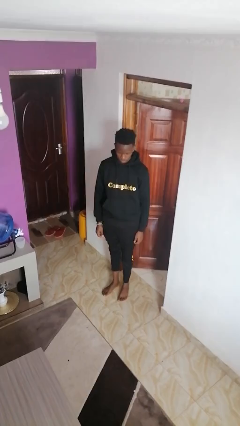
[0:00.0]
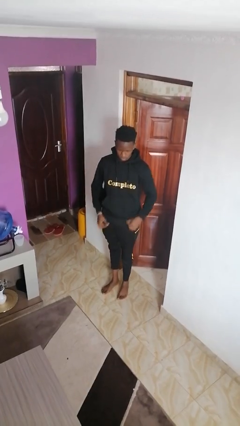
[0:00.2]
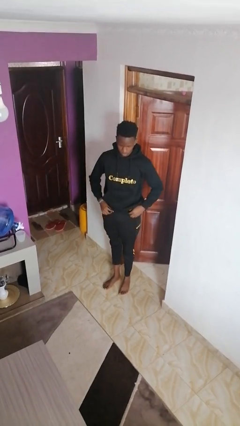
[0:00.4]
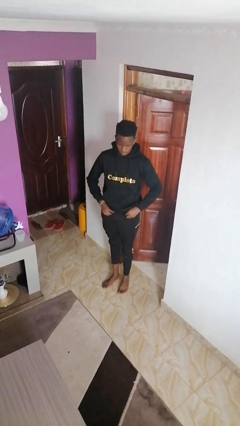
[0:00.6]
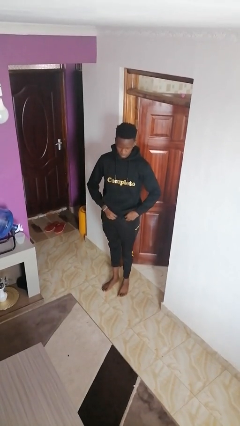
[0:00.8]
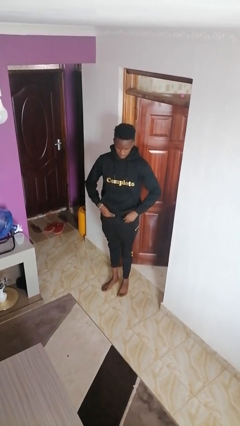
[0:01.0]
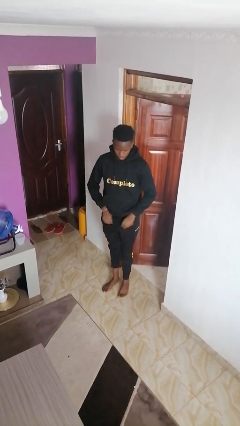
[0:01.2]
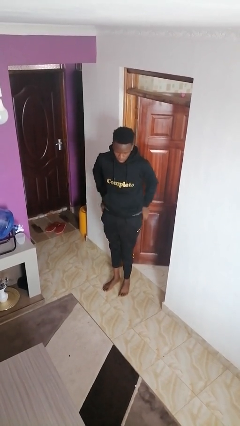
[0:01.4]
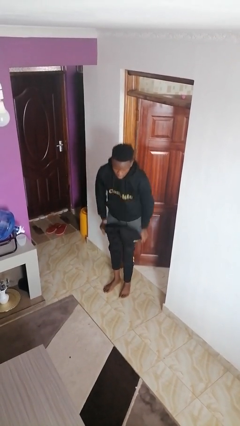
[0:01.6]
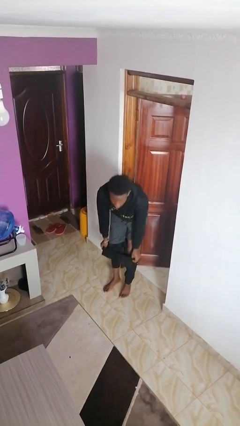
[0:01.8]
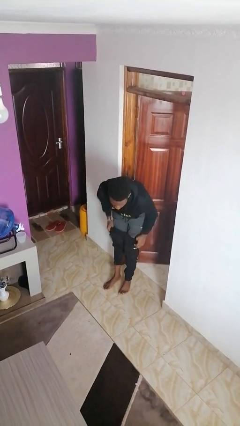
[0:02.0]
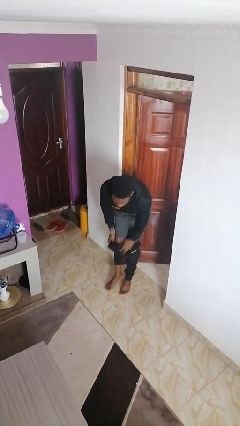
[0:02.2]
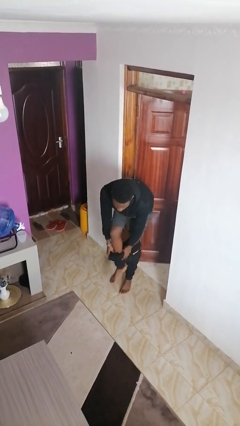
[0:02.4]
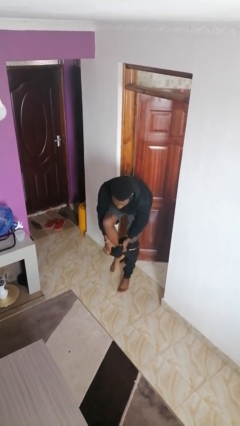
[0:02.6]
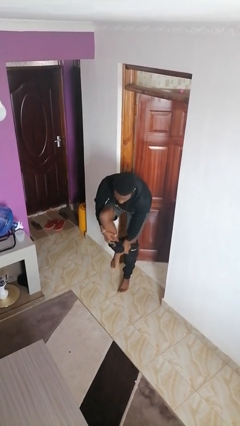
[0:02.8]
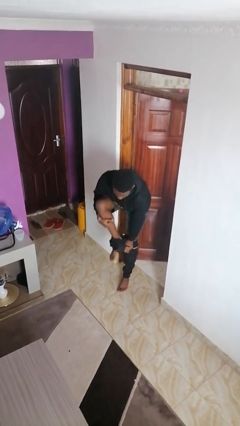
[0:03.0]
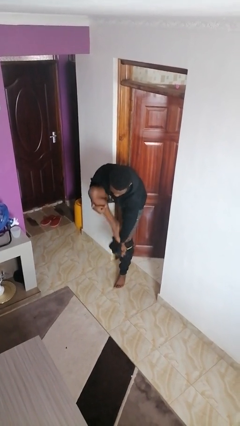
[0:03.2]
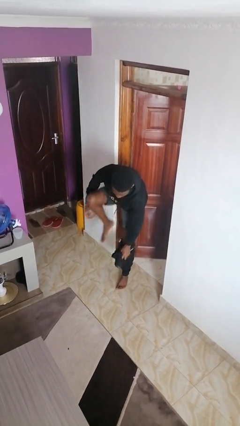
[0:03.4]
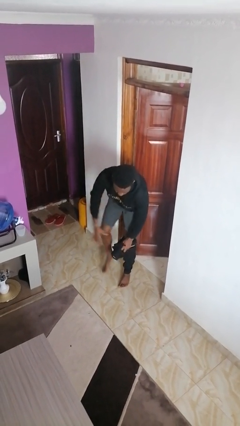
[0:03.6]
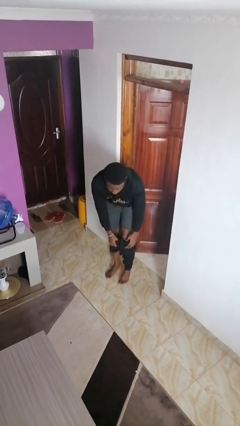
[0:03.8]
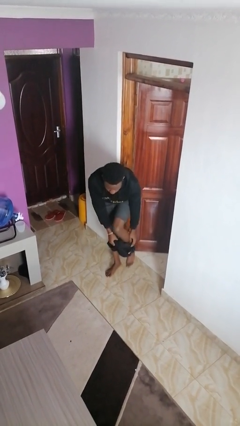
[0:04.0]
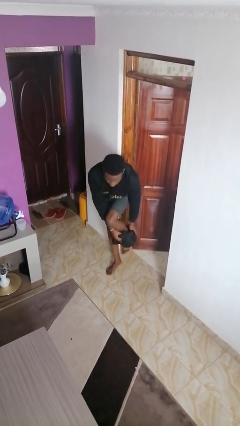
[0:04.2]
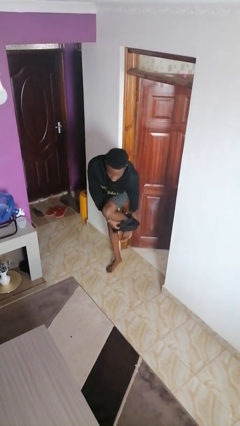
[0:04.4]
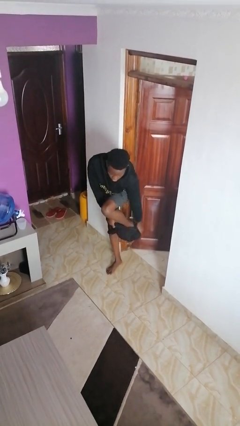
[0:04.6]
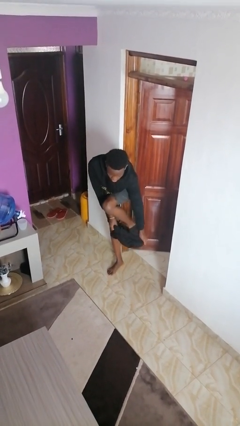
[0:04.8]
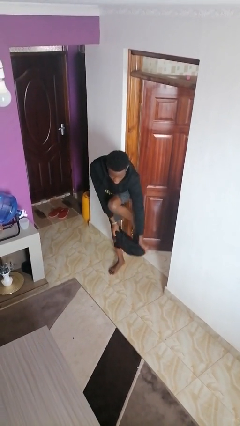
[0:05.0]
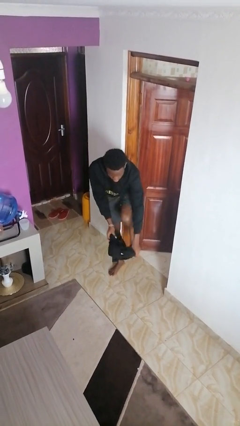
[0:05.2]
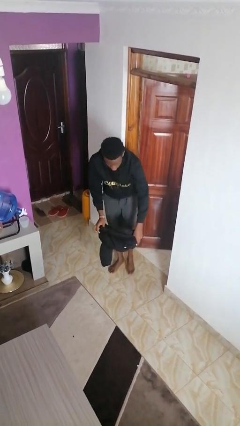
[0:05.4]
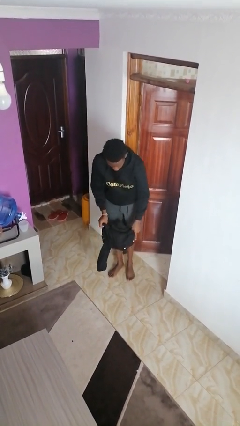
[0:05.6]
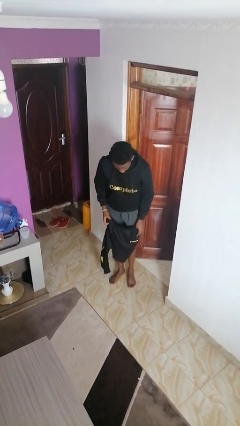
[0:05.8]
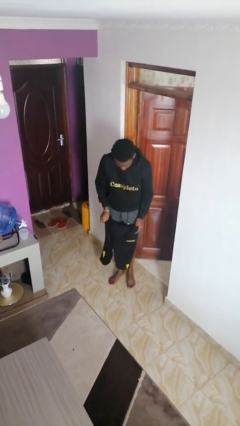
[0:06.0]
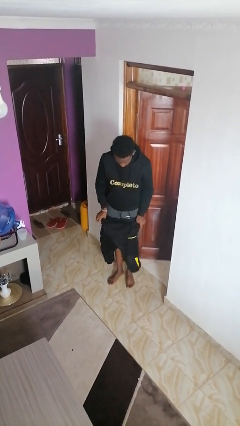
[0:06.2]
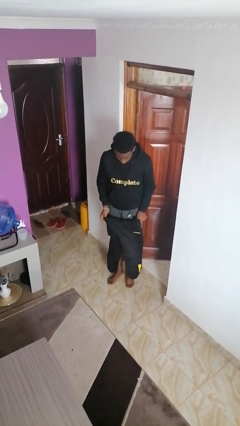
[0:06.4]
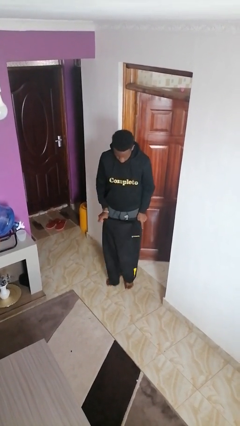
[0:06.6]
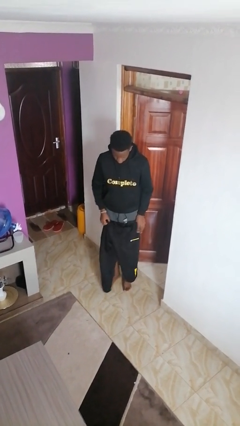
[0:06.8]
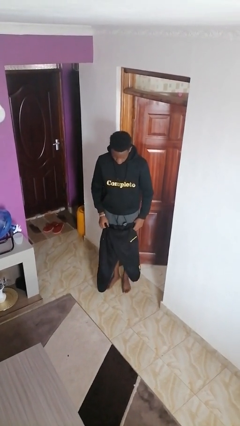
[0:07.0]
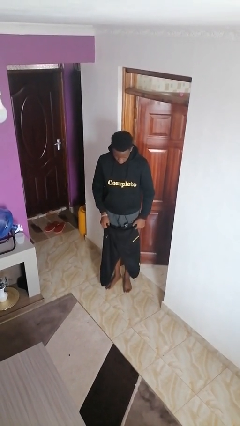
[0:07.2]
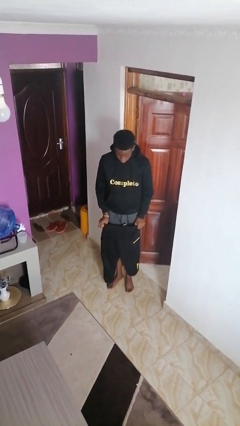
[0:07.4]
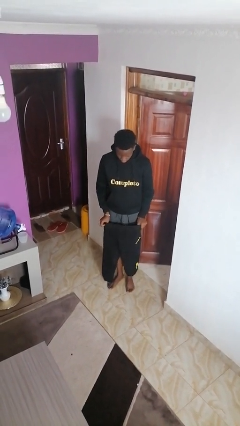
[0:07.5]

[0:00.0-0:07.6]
person takes off pants

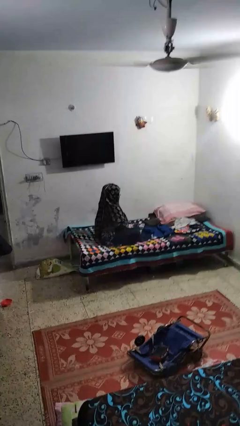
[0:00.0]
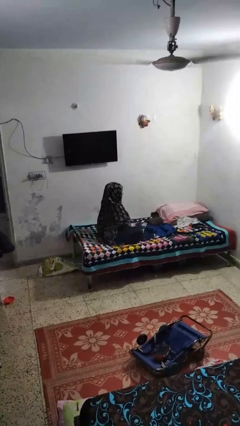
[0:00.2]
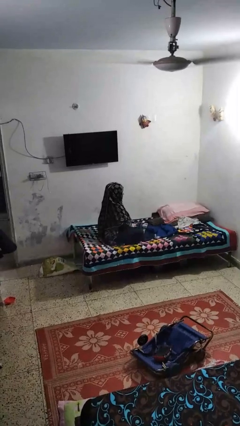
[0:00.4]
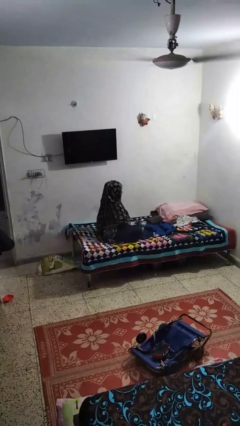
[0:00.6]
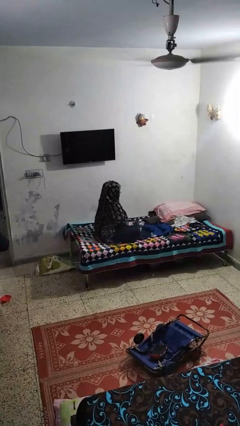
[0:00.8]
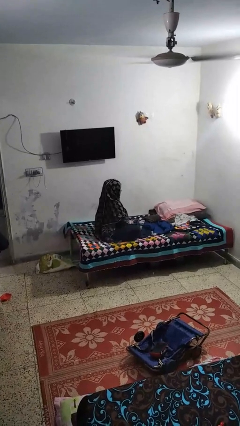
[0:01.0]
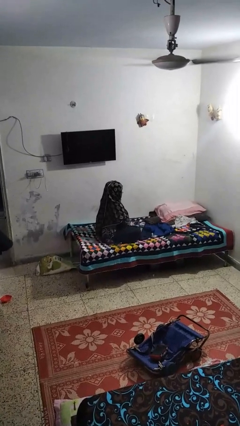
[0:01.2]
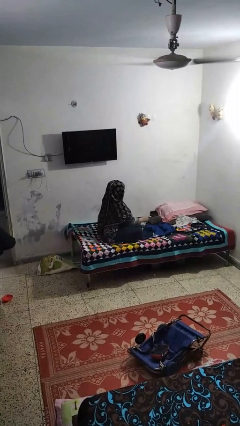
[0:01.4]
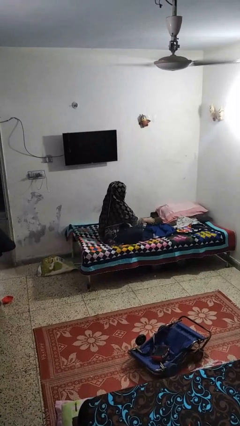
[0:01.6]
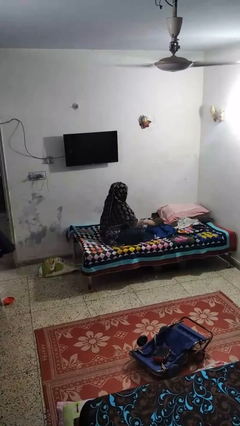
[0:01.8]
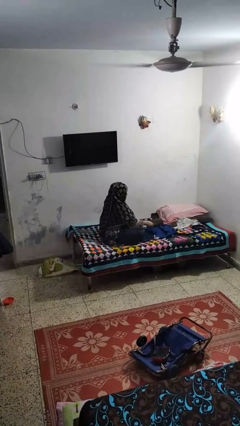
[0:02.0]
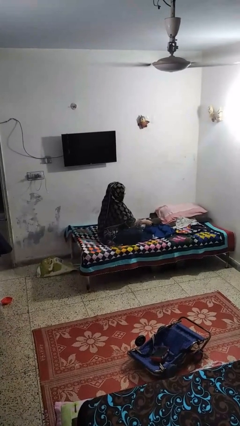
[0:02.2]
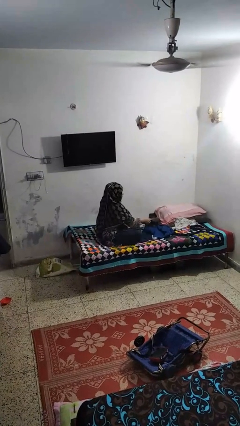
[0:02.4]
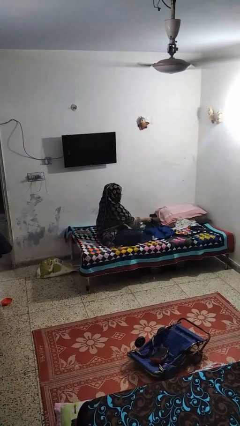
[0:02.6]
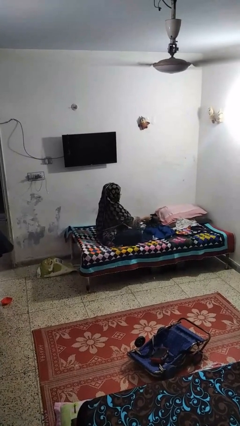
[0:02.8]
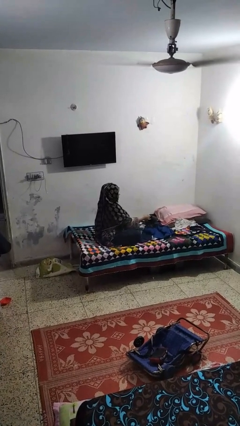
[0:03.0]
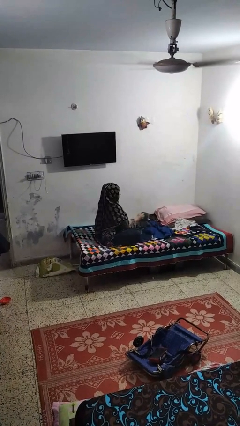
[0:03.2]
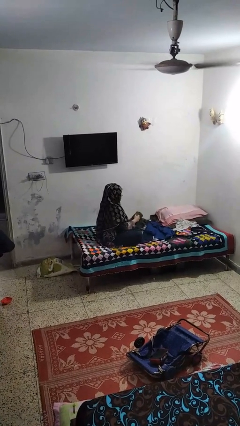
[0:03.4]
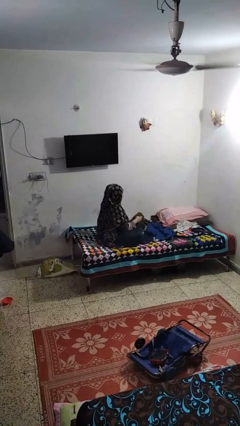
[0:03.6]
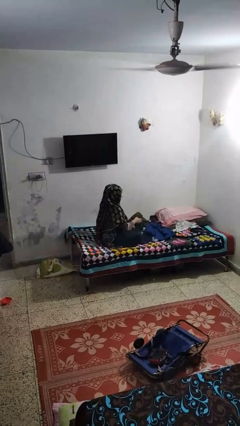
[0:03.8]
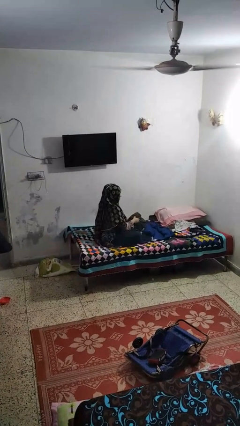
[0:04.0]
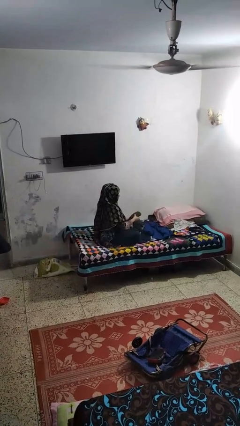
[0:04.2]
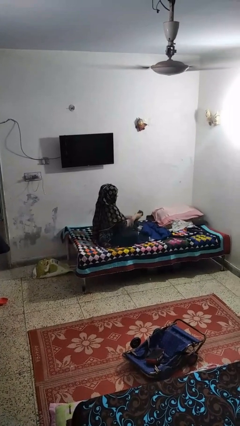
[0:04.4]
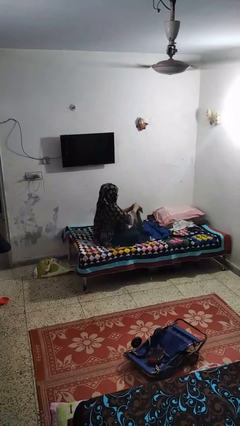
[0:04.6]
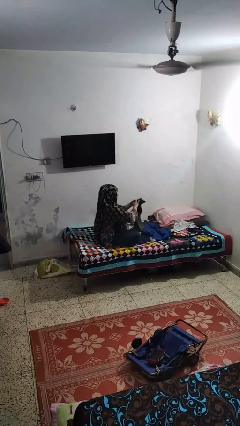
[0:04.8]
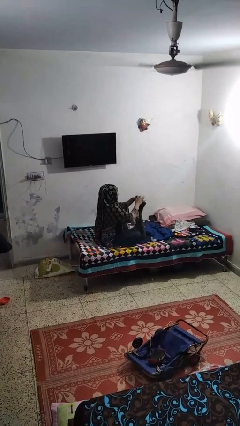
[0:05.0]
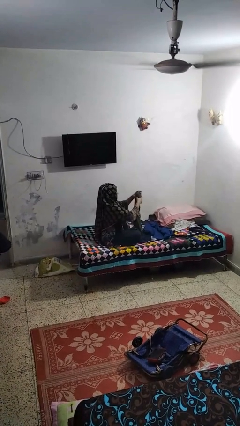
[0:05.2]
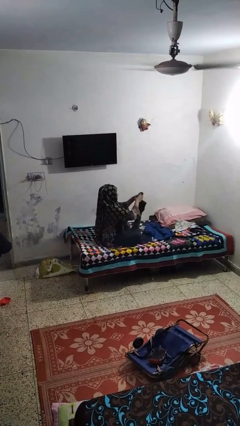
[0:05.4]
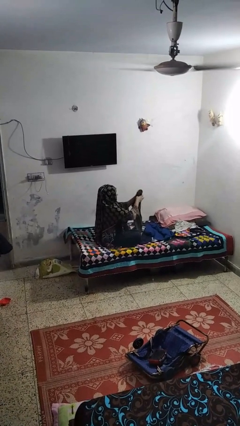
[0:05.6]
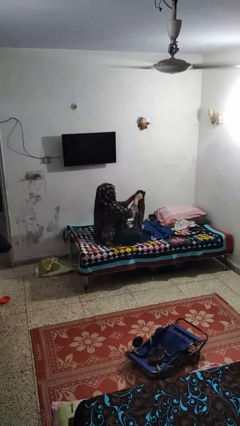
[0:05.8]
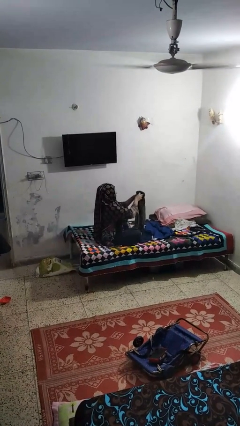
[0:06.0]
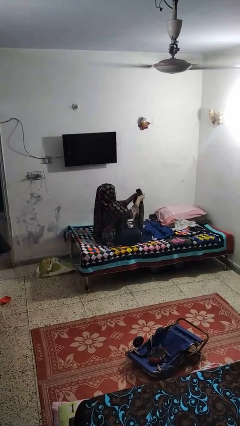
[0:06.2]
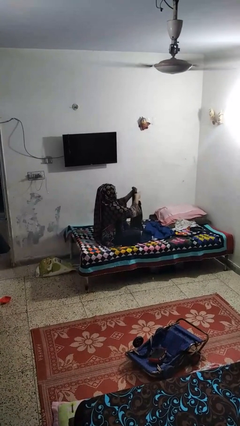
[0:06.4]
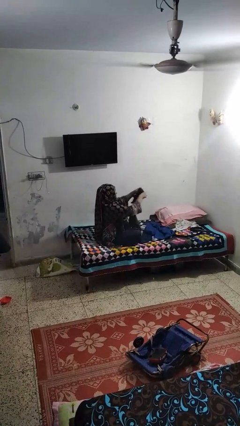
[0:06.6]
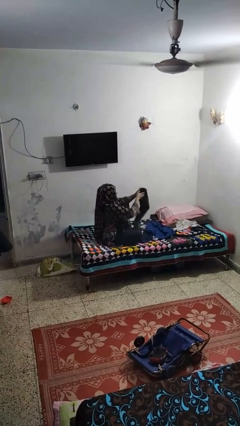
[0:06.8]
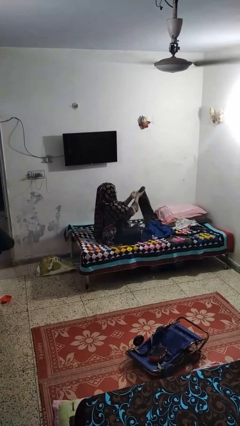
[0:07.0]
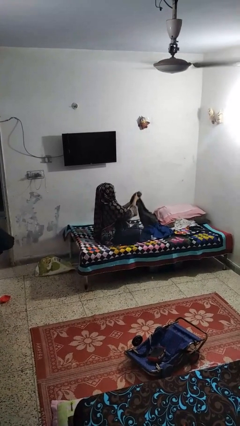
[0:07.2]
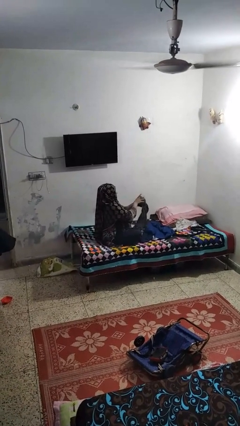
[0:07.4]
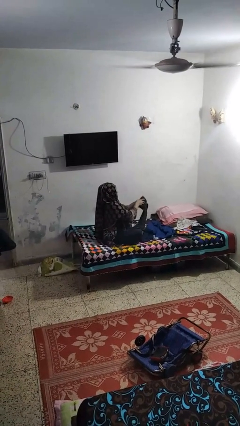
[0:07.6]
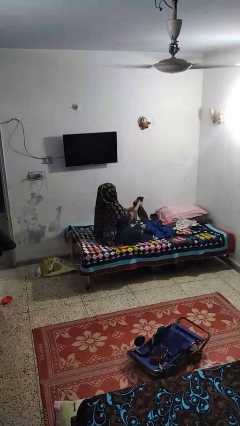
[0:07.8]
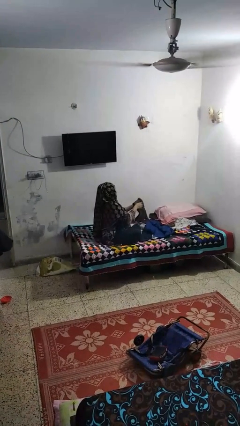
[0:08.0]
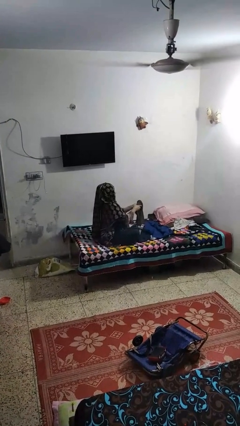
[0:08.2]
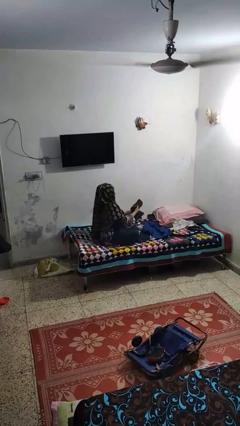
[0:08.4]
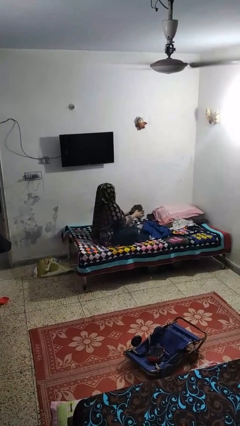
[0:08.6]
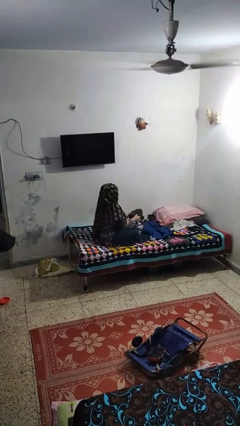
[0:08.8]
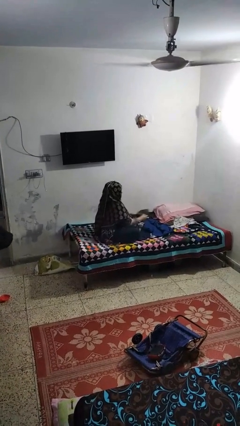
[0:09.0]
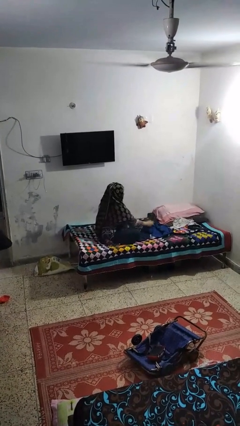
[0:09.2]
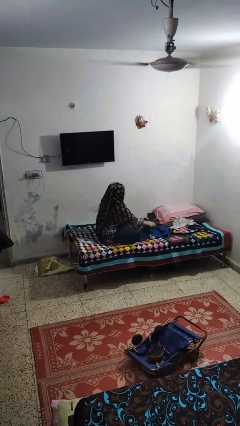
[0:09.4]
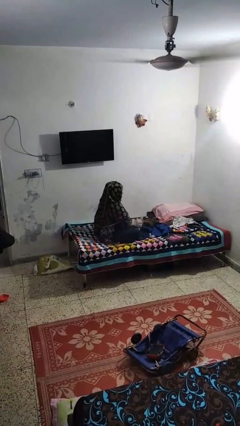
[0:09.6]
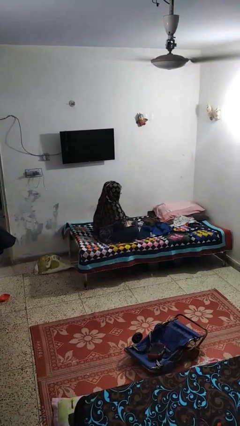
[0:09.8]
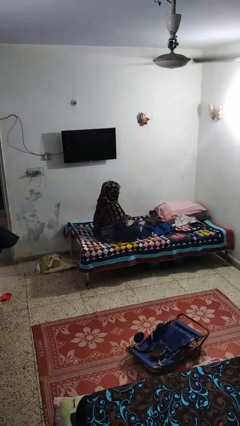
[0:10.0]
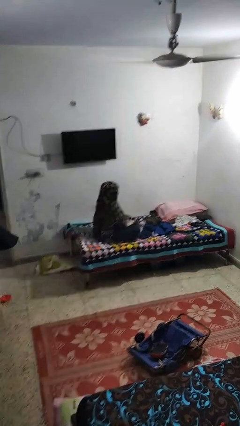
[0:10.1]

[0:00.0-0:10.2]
person folds shirt
